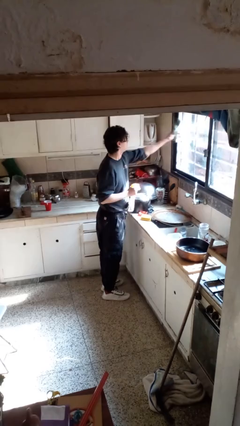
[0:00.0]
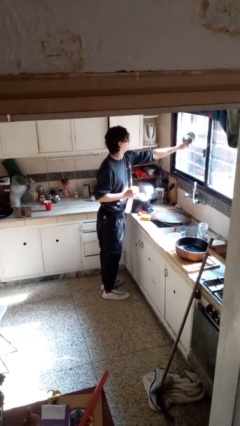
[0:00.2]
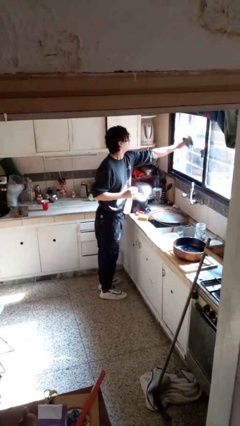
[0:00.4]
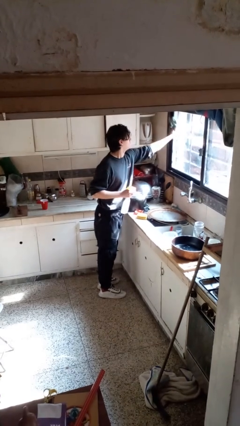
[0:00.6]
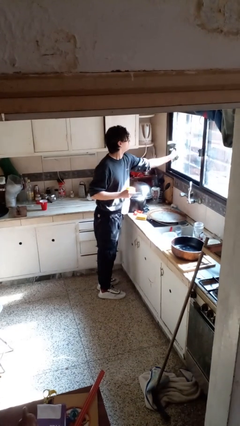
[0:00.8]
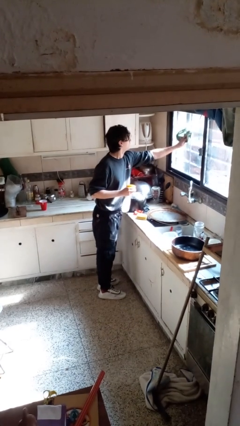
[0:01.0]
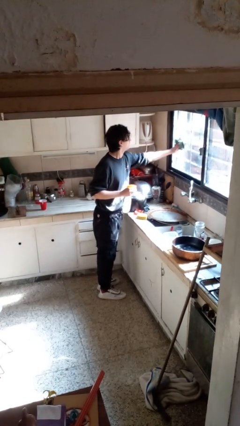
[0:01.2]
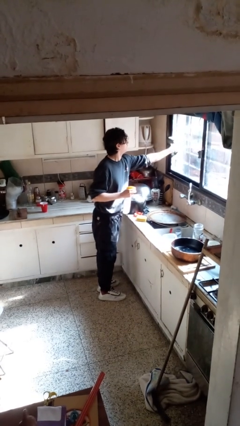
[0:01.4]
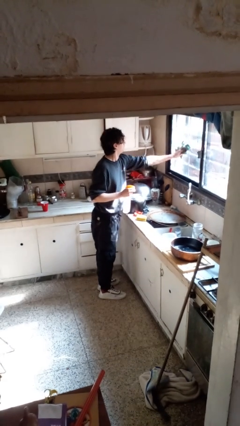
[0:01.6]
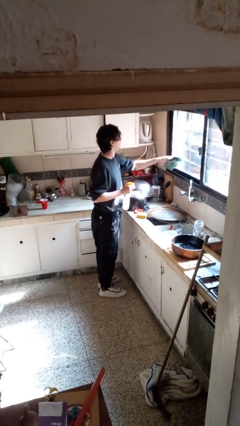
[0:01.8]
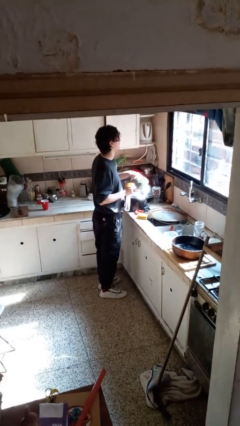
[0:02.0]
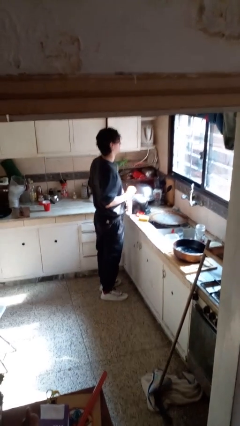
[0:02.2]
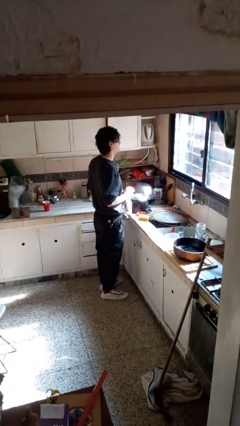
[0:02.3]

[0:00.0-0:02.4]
person washes window

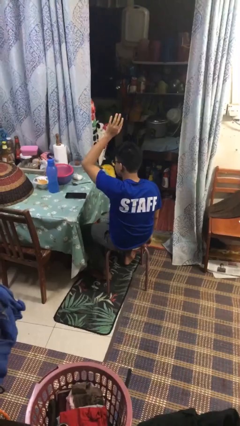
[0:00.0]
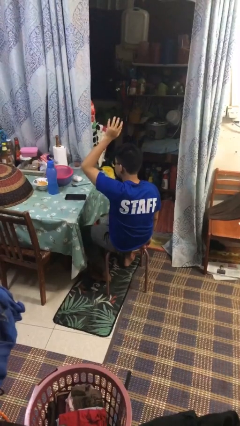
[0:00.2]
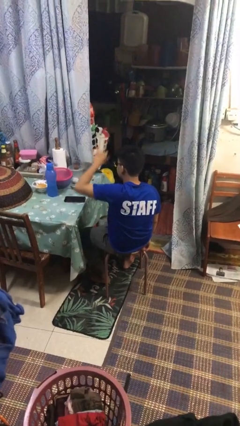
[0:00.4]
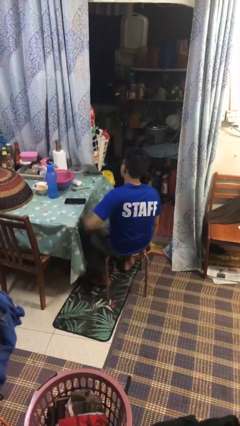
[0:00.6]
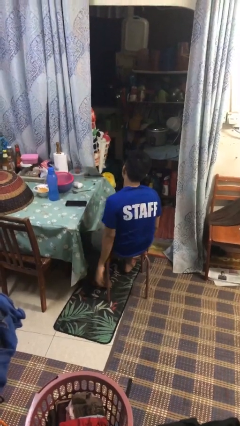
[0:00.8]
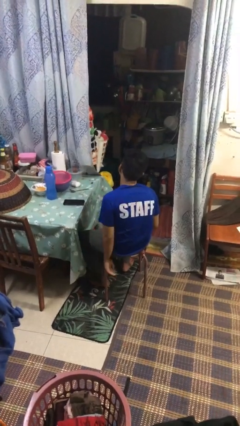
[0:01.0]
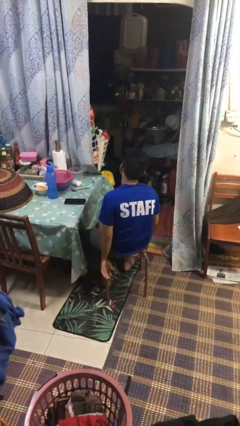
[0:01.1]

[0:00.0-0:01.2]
person gestures lower hand

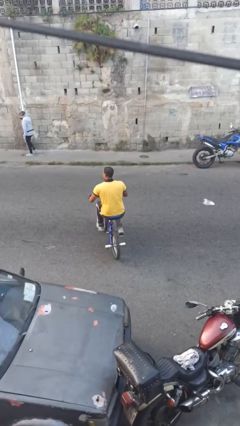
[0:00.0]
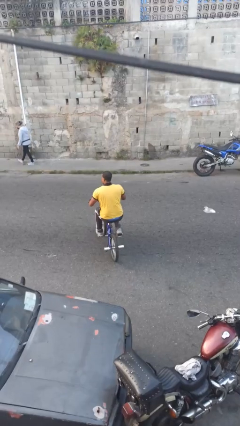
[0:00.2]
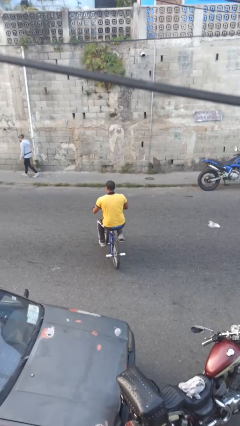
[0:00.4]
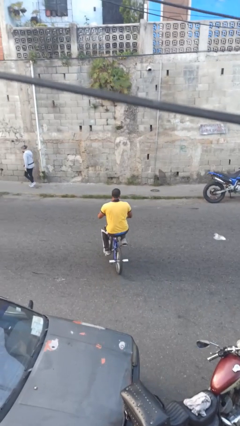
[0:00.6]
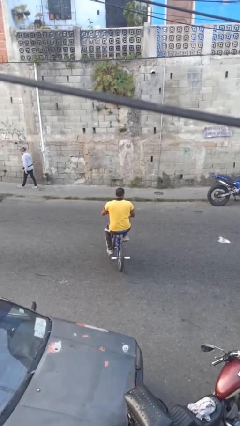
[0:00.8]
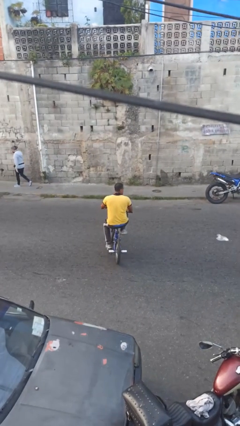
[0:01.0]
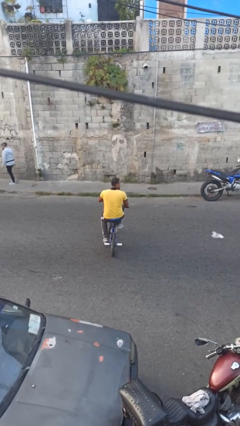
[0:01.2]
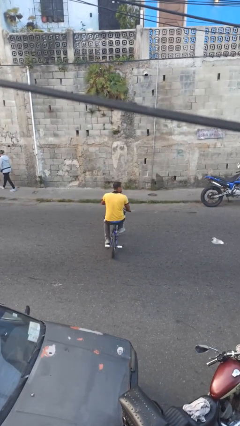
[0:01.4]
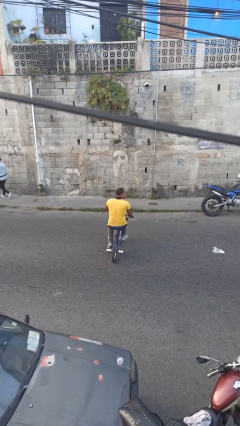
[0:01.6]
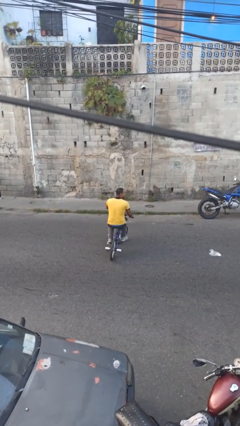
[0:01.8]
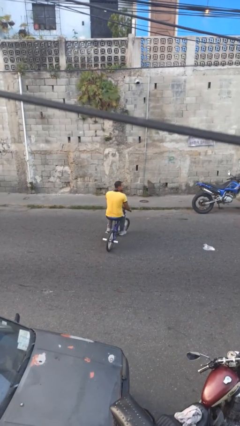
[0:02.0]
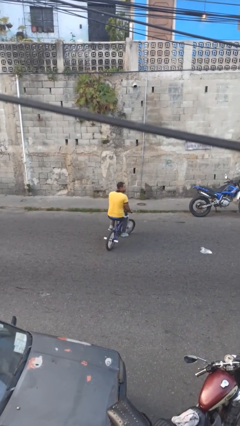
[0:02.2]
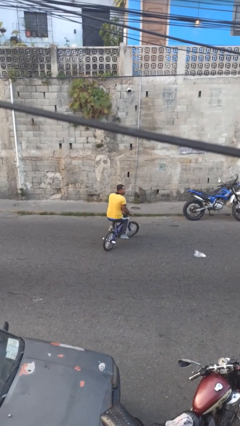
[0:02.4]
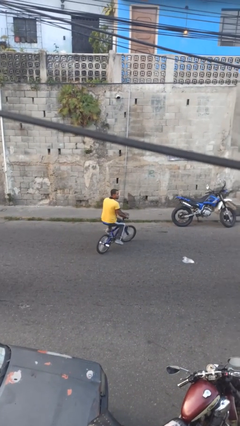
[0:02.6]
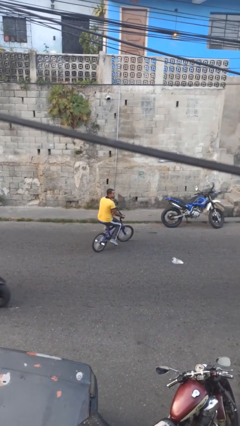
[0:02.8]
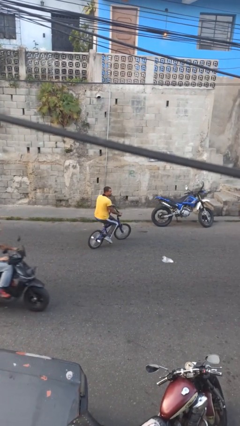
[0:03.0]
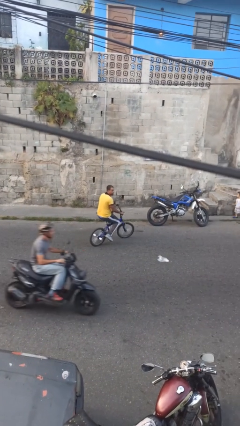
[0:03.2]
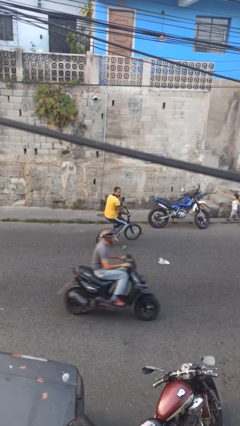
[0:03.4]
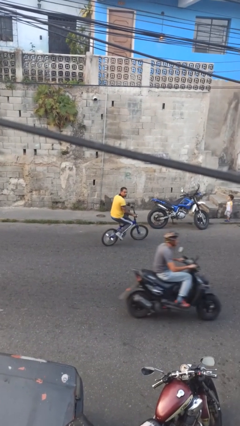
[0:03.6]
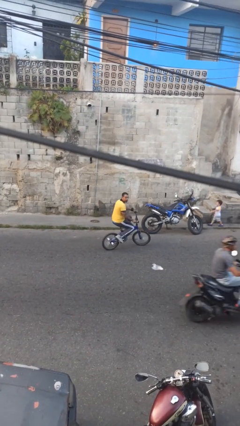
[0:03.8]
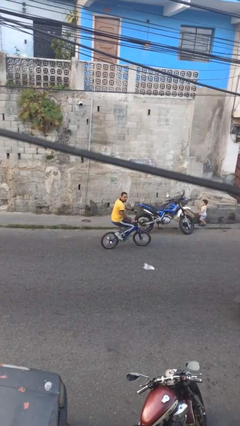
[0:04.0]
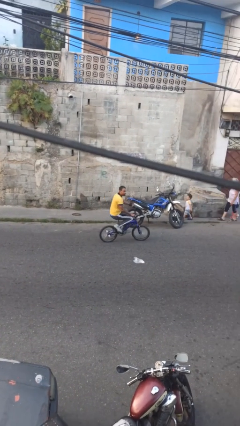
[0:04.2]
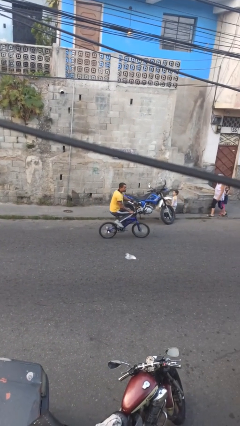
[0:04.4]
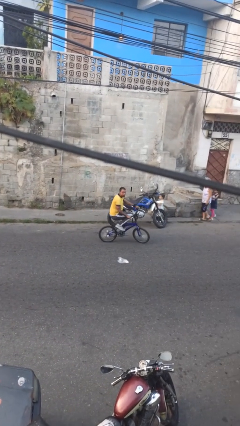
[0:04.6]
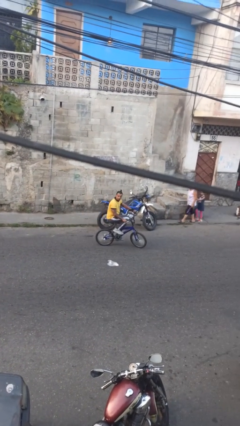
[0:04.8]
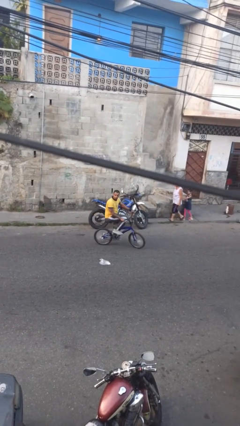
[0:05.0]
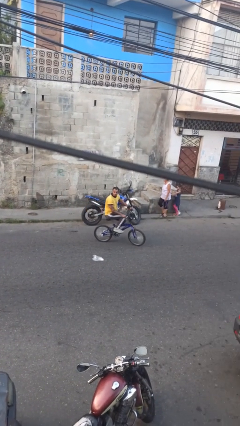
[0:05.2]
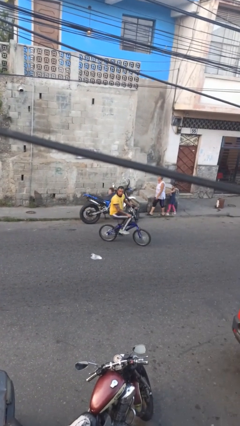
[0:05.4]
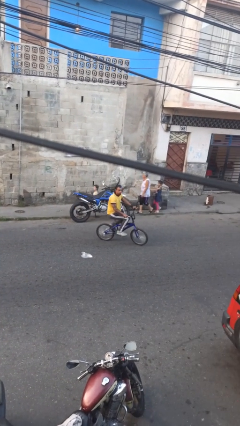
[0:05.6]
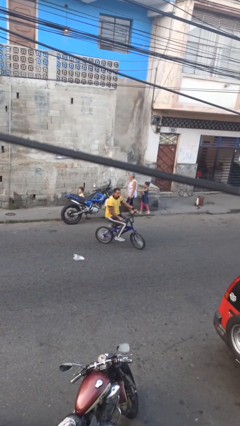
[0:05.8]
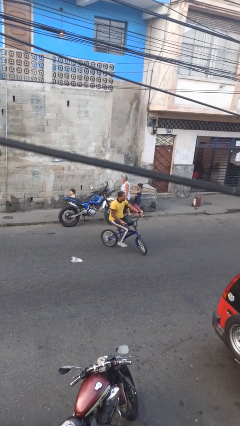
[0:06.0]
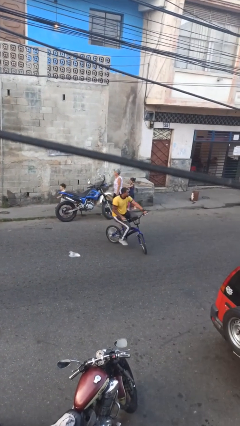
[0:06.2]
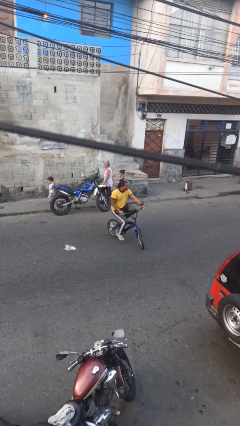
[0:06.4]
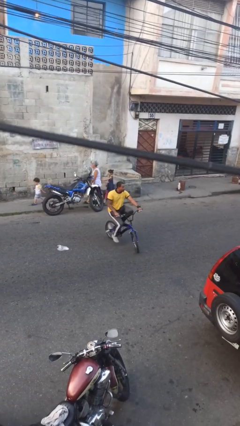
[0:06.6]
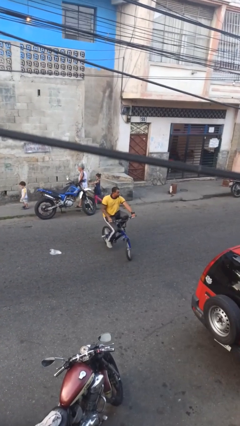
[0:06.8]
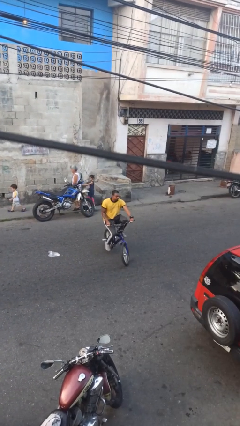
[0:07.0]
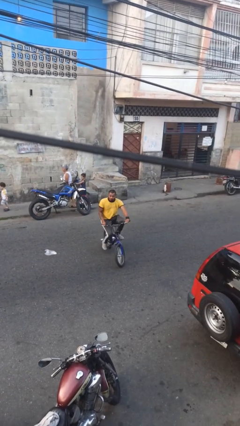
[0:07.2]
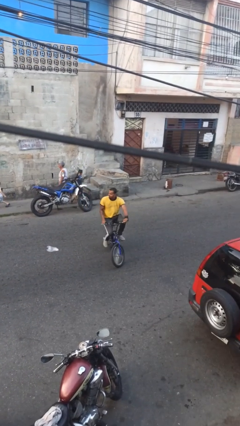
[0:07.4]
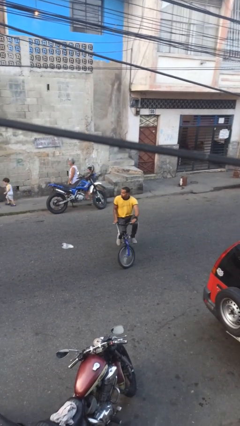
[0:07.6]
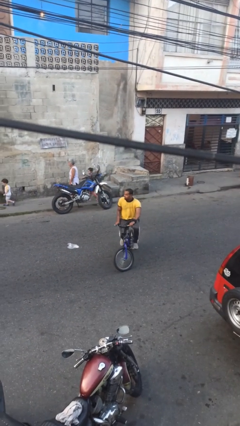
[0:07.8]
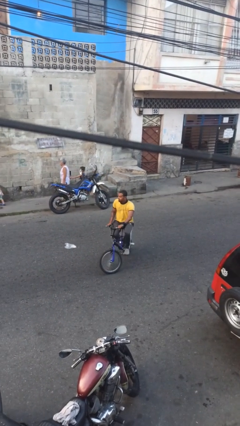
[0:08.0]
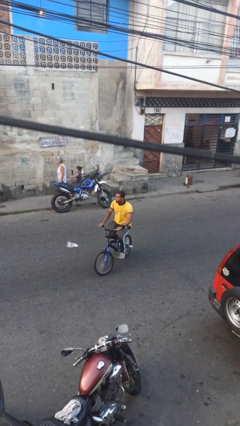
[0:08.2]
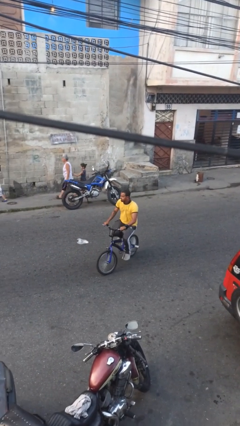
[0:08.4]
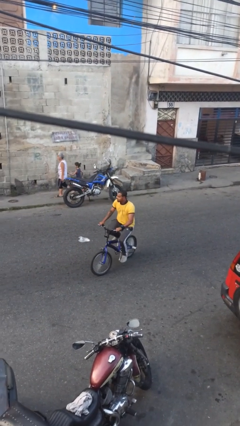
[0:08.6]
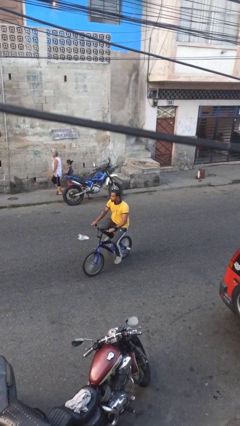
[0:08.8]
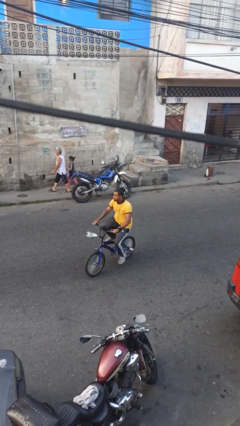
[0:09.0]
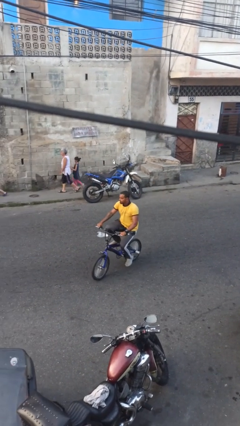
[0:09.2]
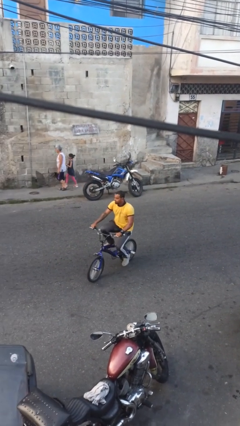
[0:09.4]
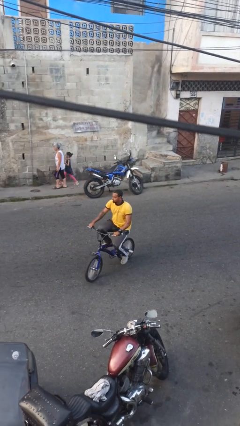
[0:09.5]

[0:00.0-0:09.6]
person rides bicycle

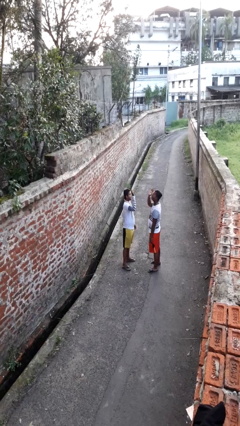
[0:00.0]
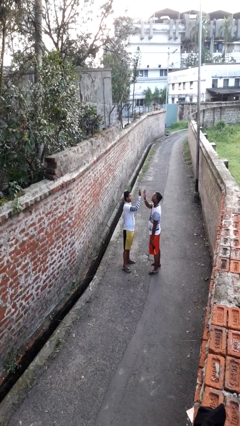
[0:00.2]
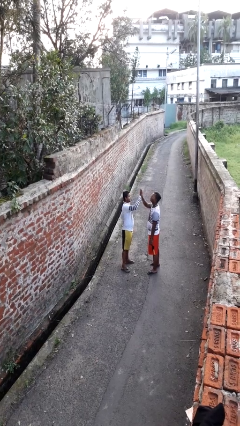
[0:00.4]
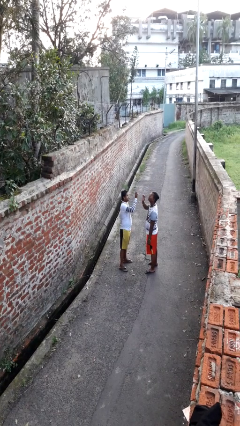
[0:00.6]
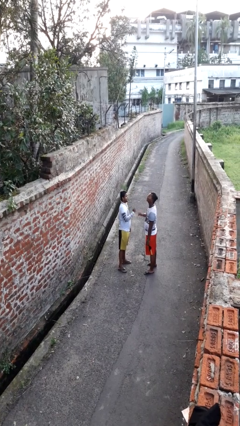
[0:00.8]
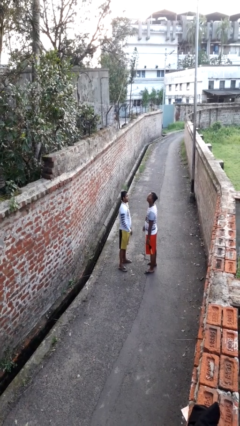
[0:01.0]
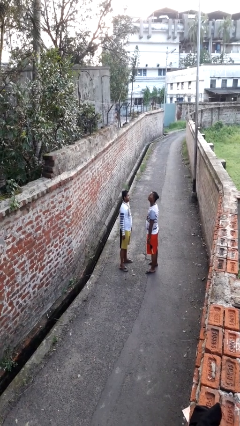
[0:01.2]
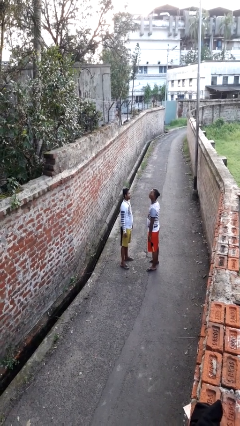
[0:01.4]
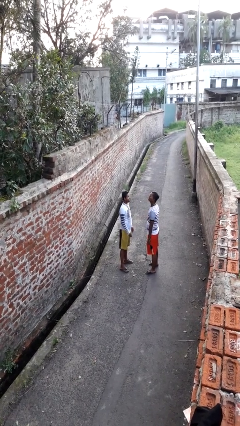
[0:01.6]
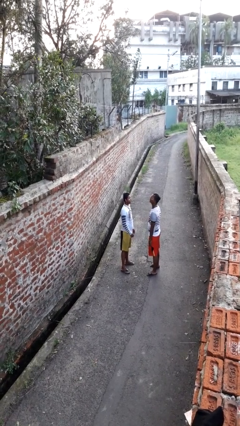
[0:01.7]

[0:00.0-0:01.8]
person highfives hand

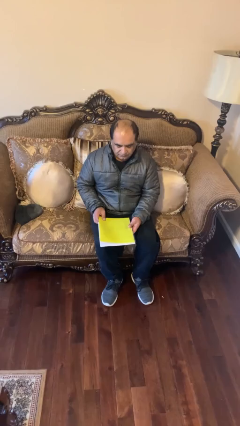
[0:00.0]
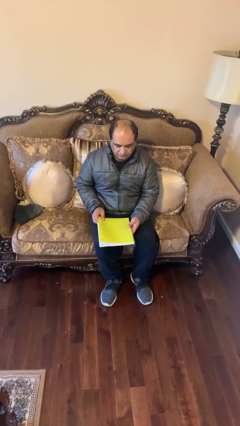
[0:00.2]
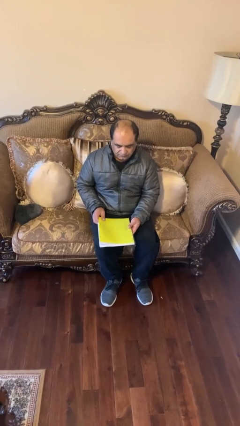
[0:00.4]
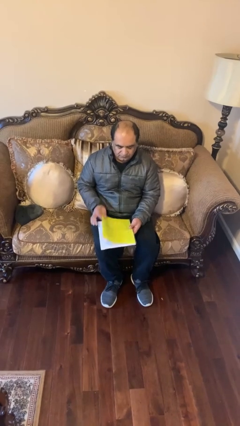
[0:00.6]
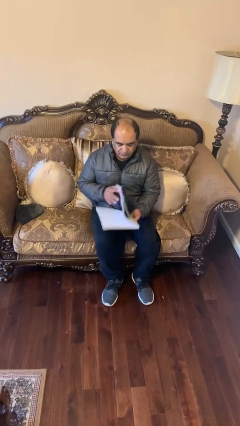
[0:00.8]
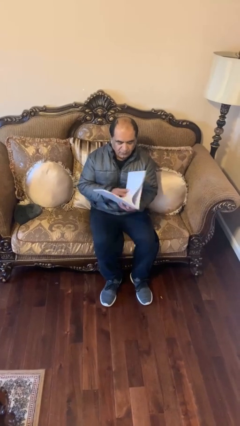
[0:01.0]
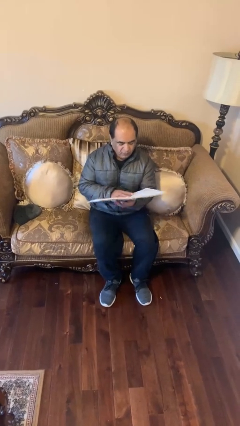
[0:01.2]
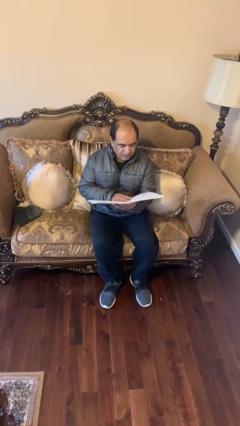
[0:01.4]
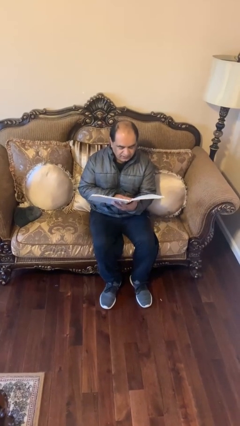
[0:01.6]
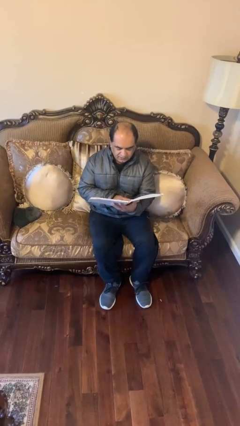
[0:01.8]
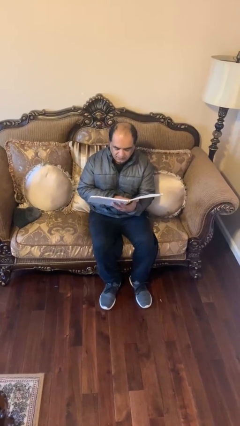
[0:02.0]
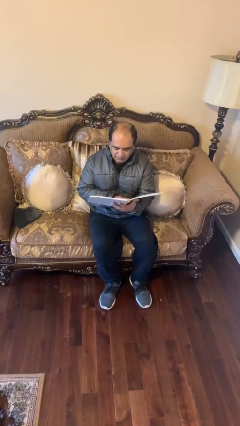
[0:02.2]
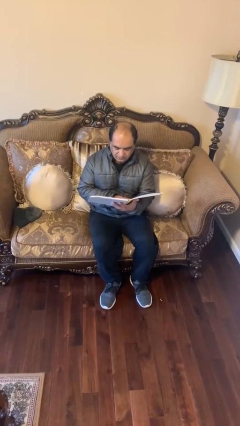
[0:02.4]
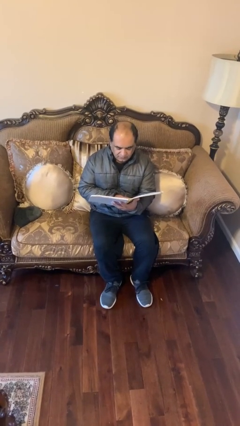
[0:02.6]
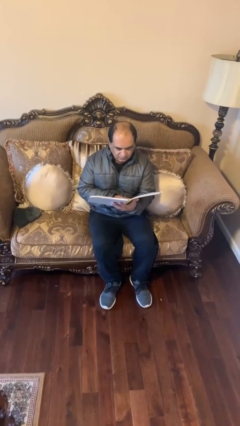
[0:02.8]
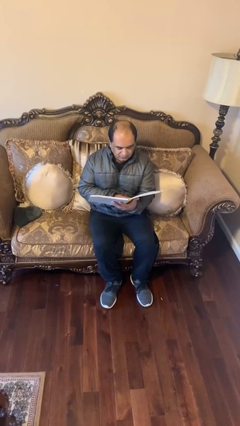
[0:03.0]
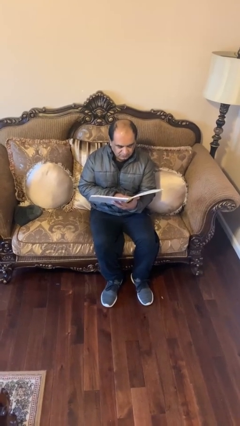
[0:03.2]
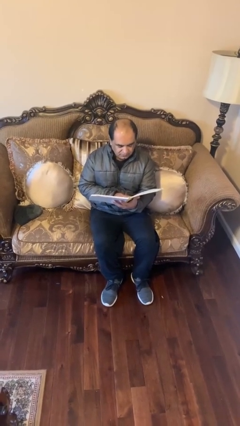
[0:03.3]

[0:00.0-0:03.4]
person reads document
